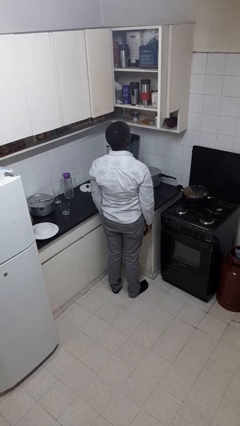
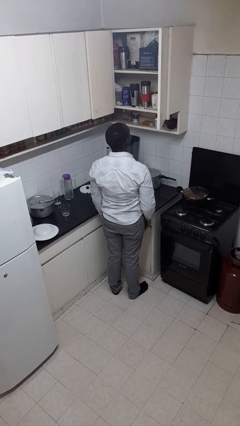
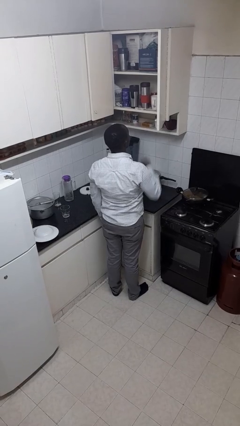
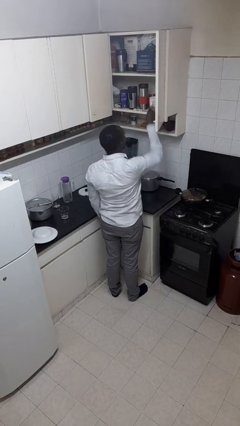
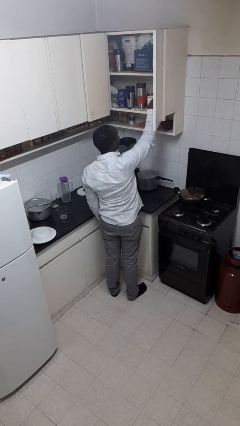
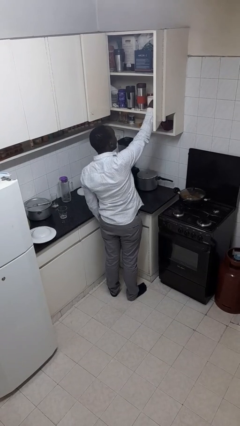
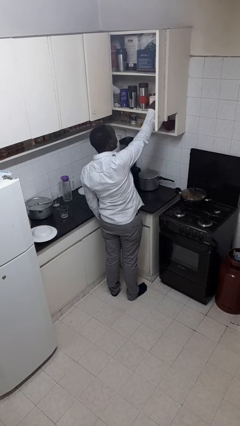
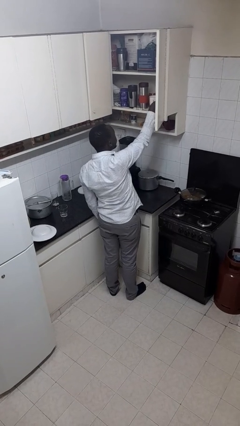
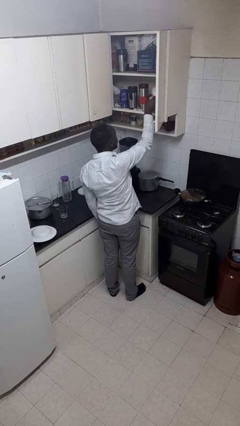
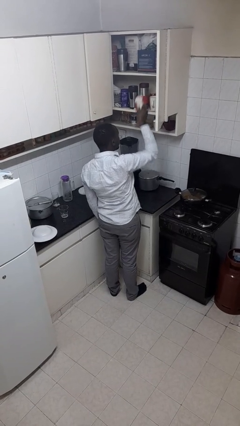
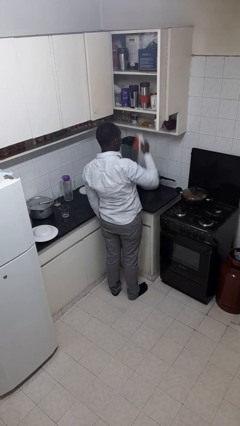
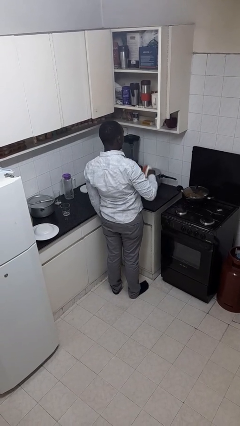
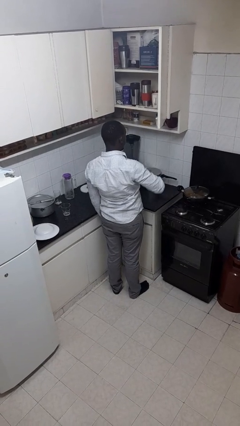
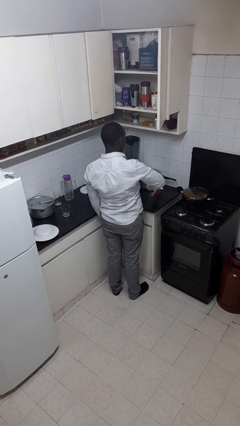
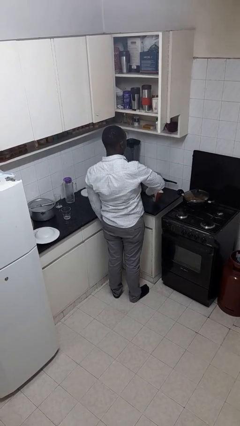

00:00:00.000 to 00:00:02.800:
person takes object from cabinet

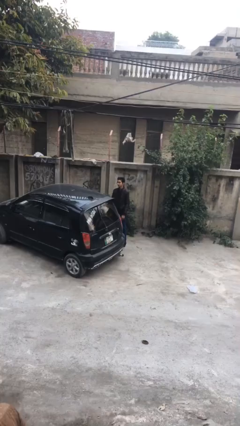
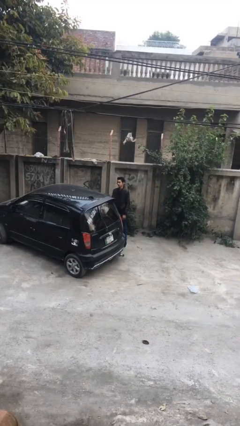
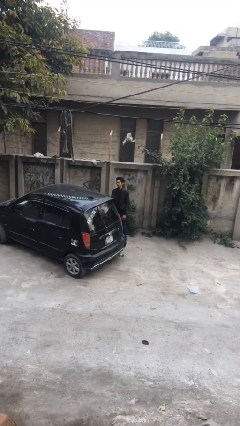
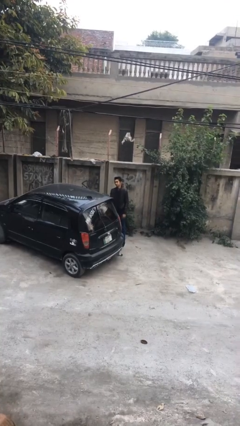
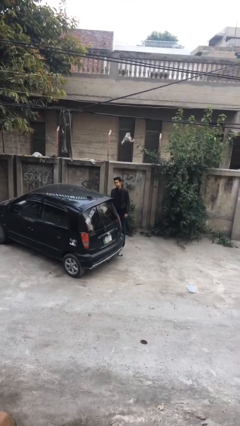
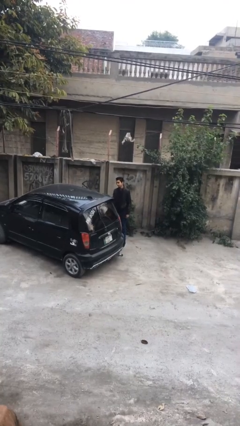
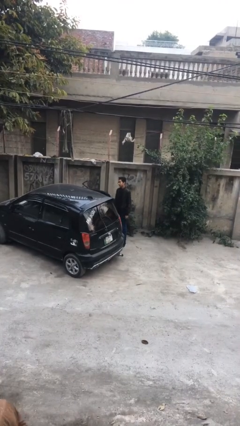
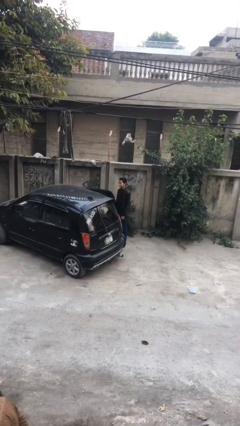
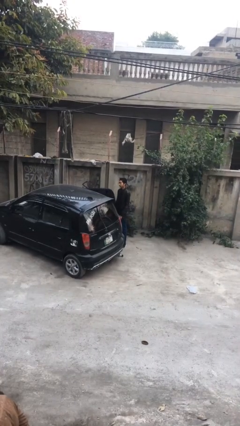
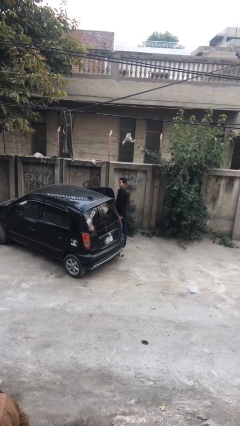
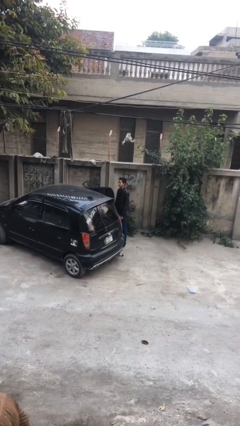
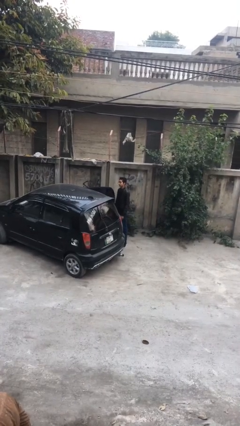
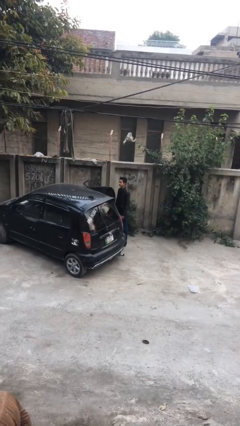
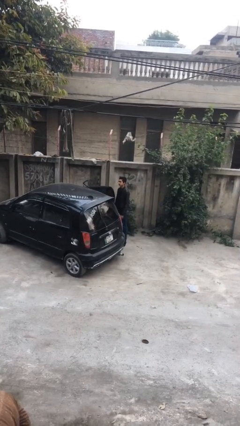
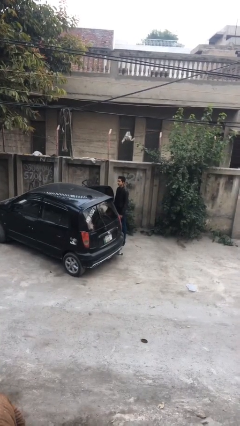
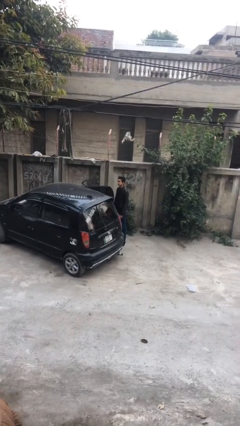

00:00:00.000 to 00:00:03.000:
person opens car door

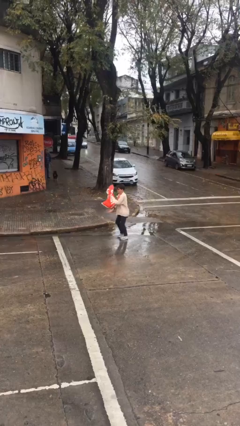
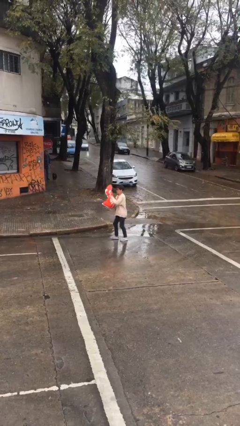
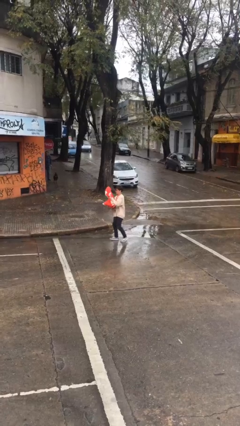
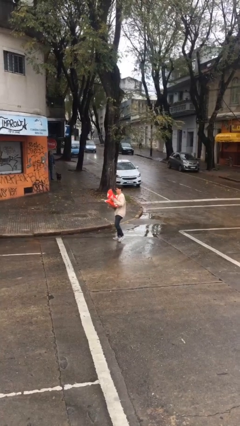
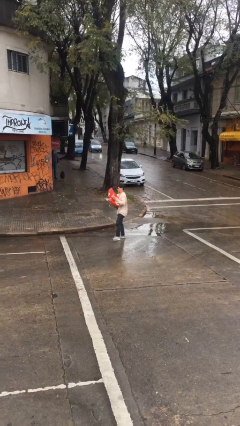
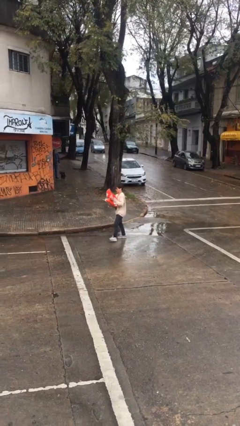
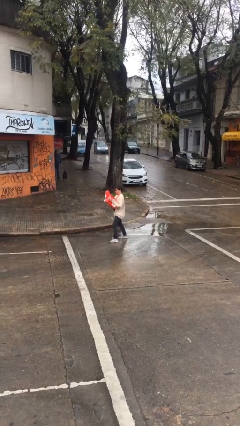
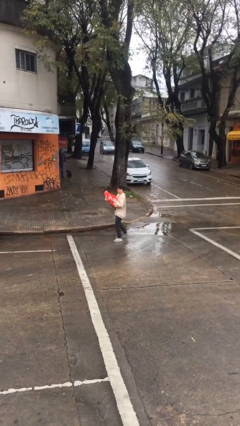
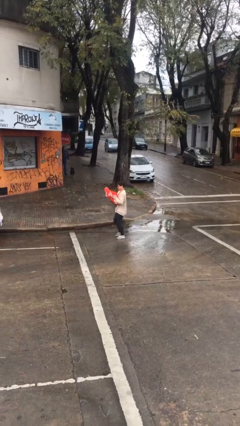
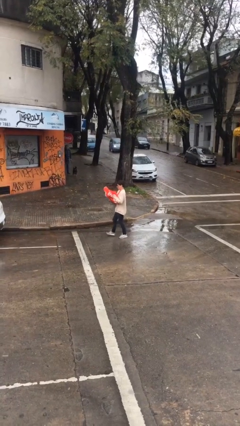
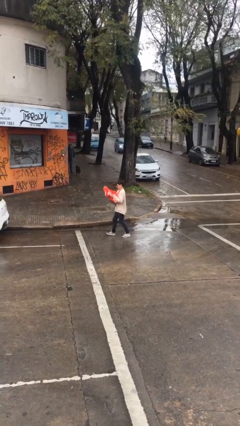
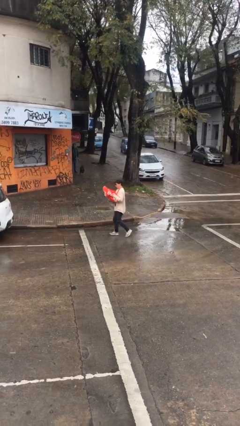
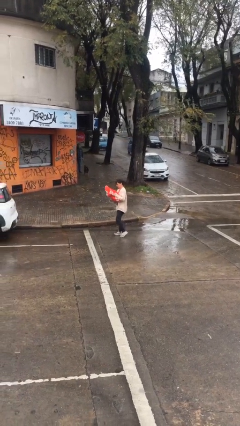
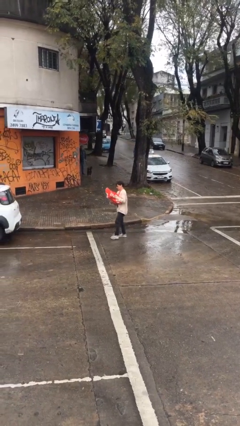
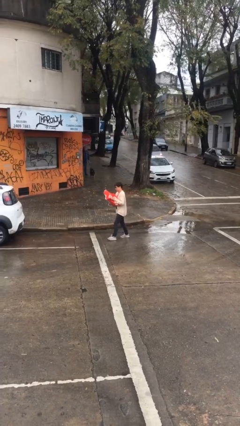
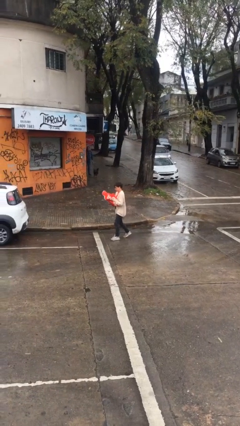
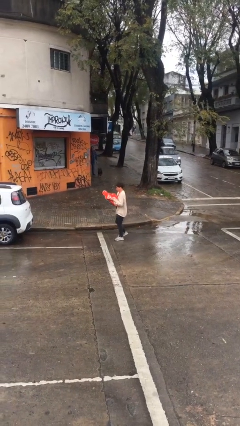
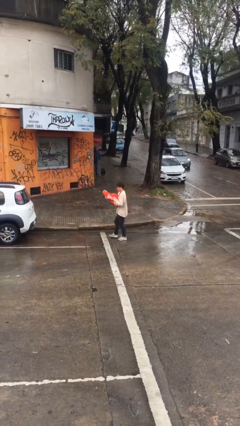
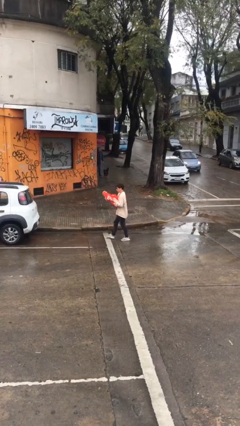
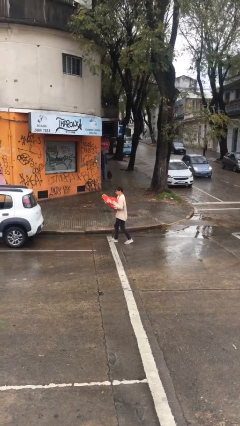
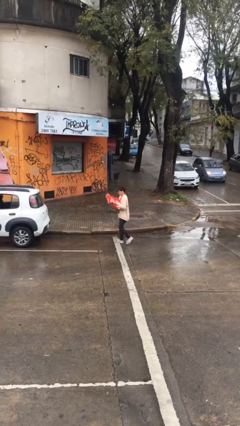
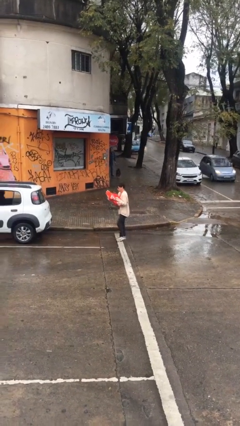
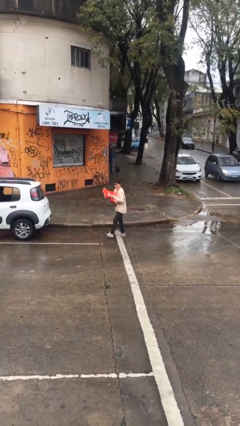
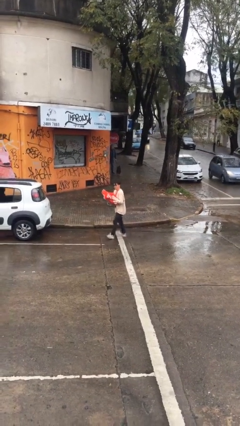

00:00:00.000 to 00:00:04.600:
person carries heavy object

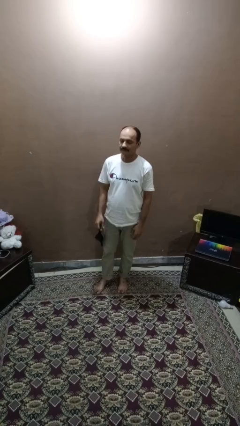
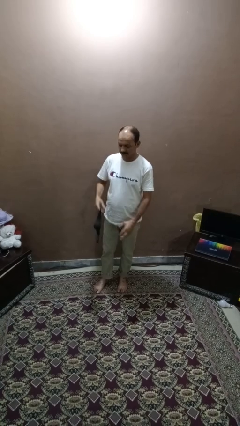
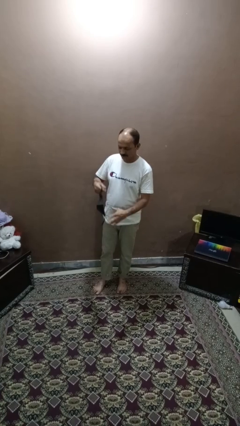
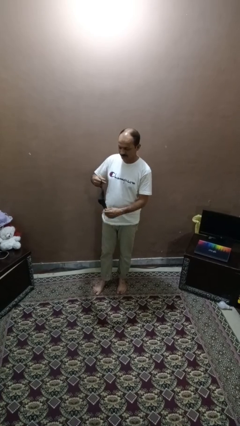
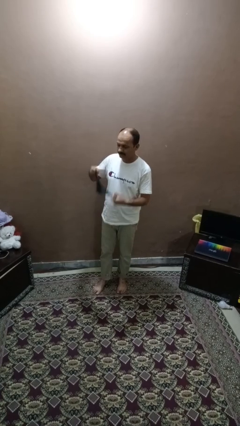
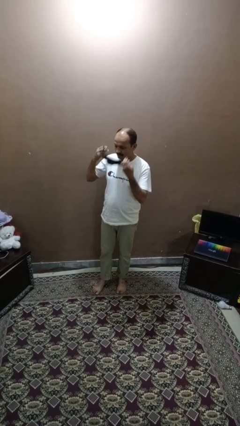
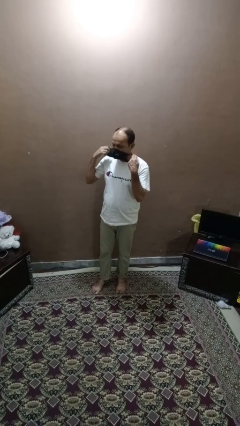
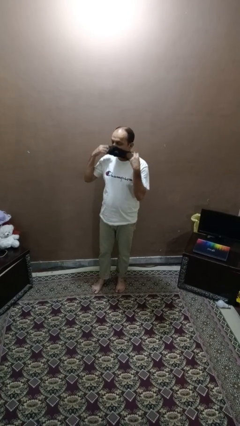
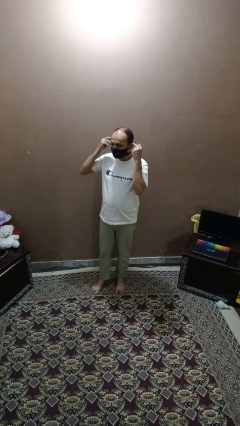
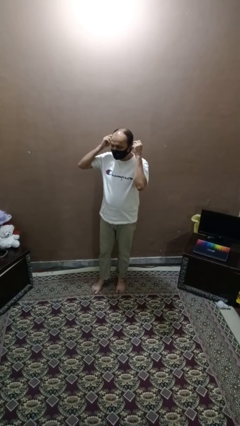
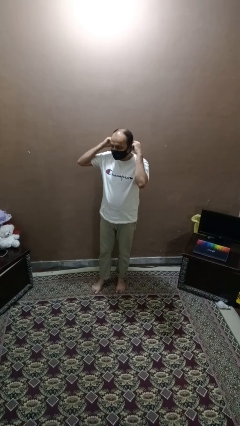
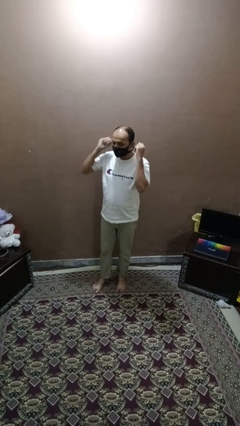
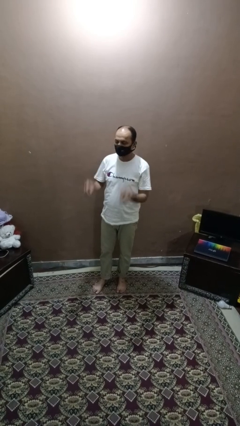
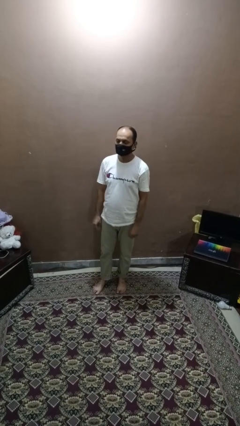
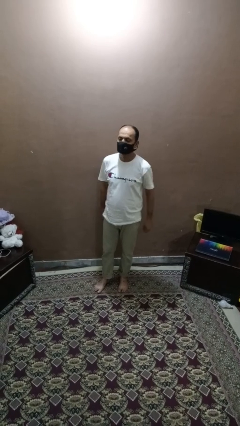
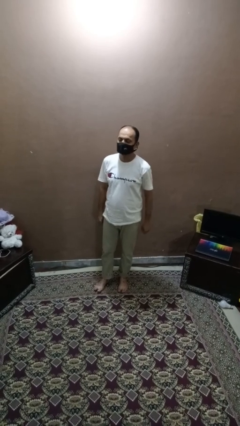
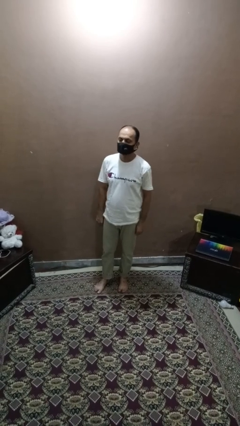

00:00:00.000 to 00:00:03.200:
person puts on facemask

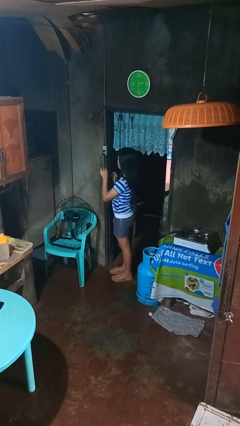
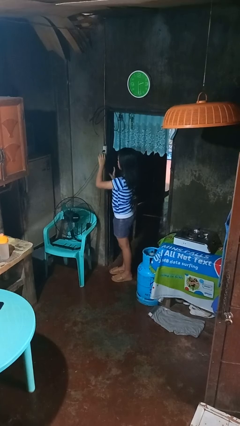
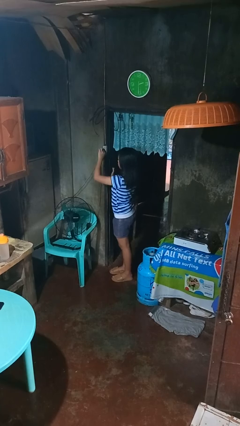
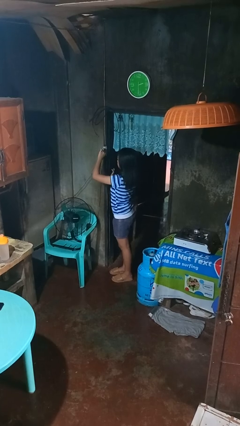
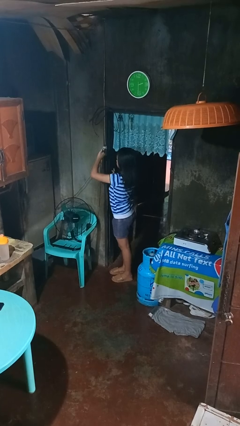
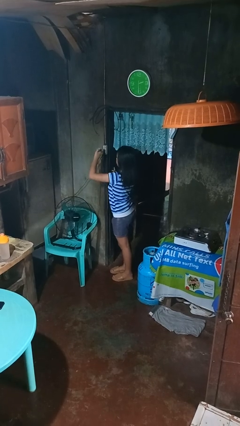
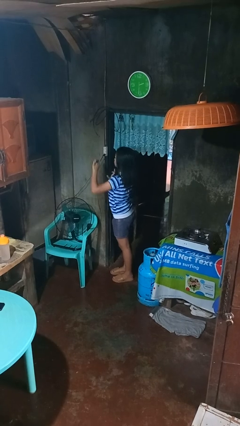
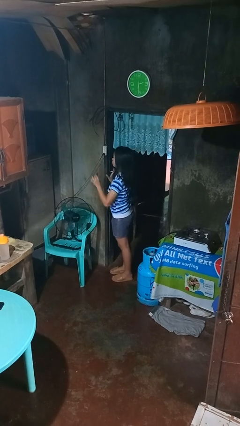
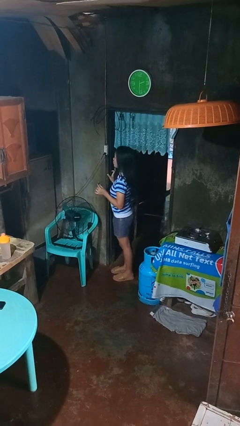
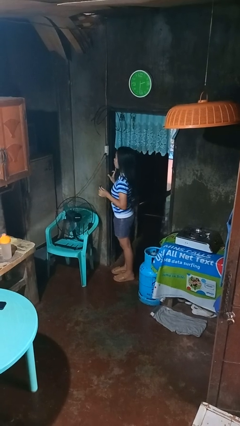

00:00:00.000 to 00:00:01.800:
person unplugs from electrical socket

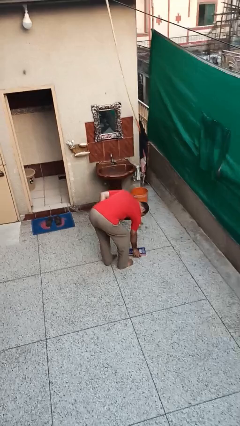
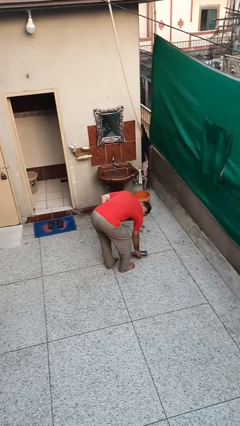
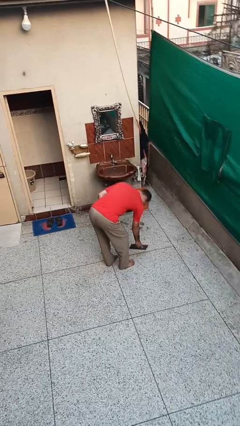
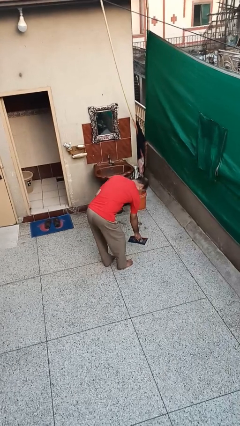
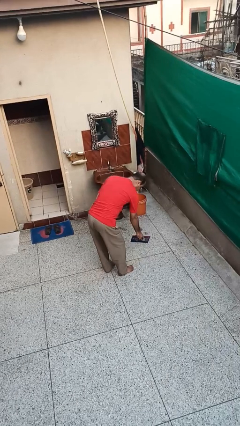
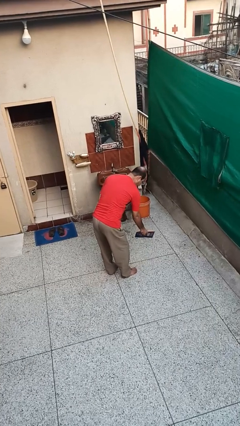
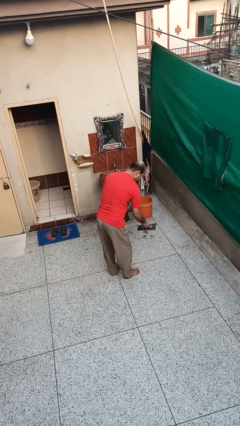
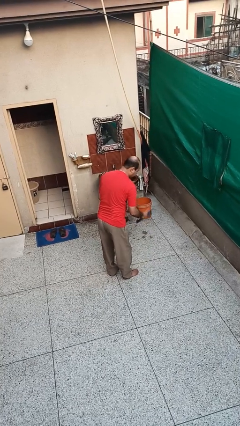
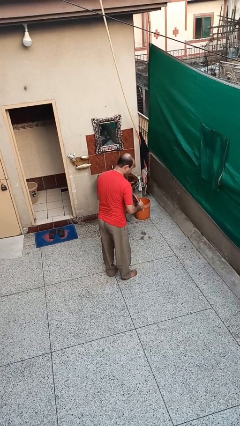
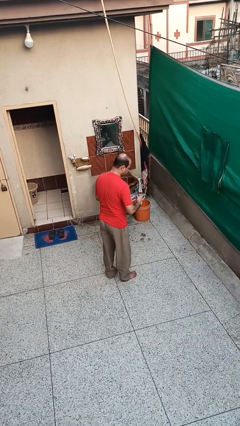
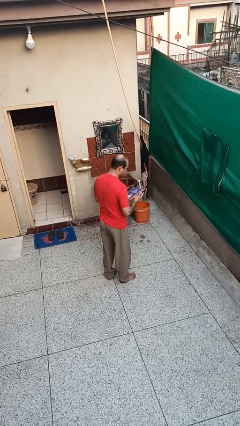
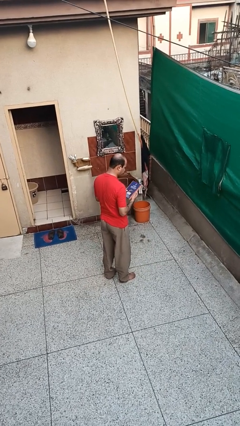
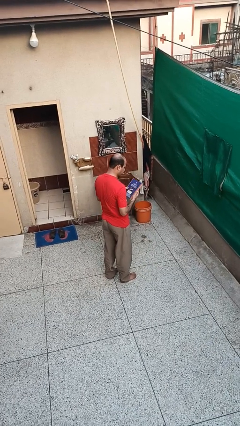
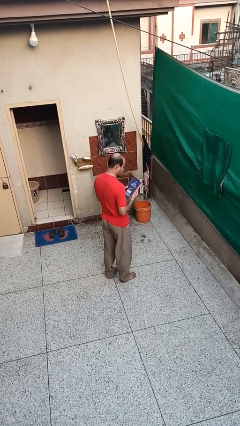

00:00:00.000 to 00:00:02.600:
person picks up object from floor
